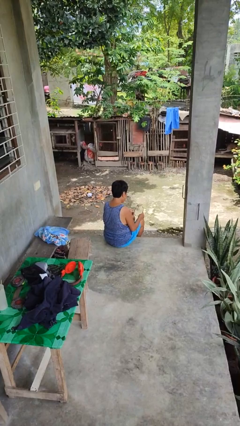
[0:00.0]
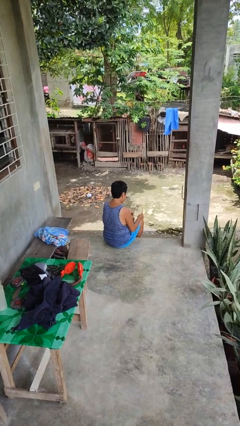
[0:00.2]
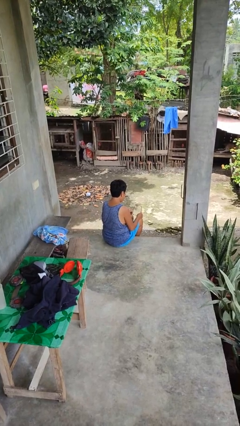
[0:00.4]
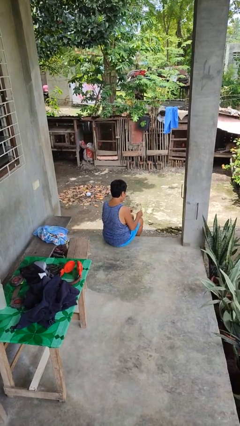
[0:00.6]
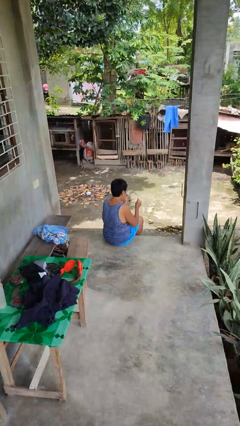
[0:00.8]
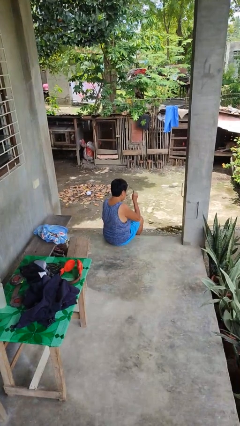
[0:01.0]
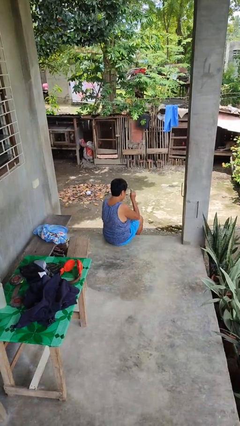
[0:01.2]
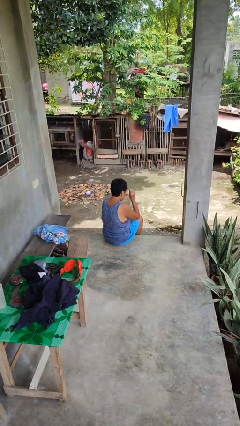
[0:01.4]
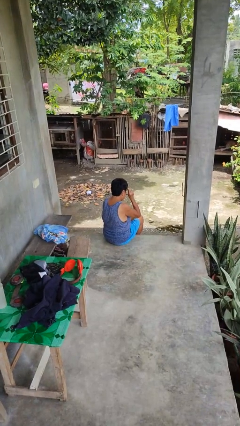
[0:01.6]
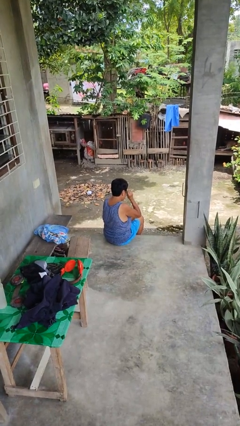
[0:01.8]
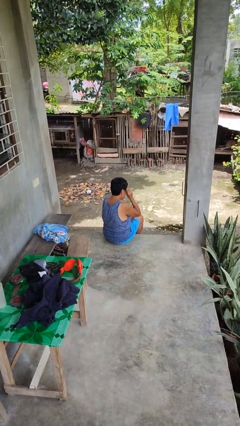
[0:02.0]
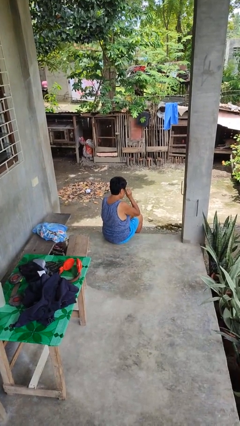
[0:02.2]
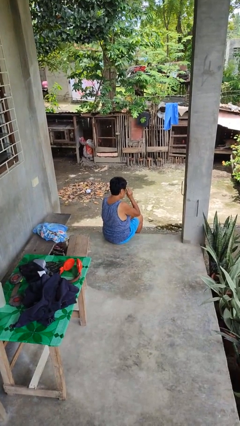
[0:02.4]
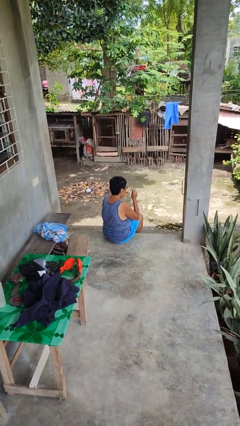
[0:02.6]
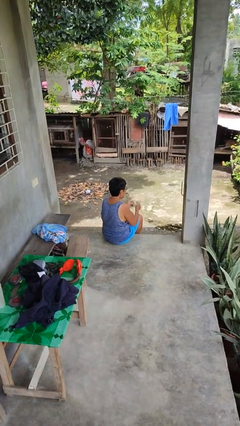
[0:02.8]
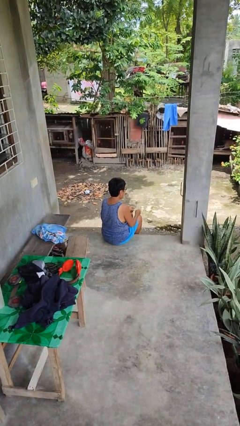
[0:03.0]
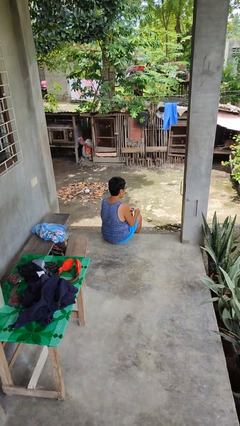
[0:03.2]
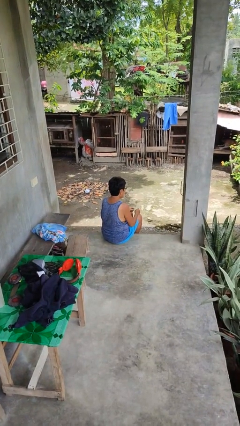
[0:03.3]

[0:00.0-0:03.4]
person puts on glasses

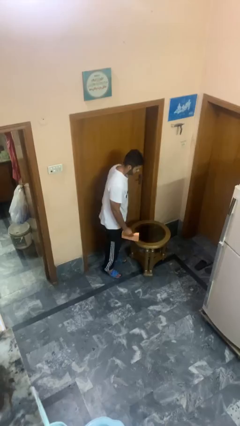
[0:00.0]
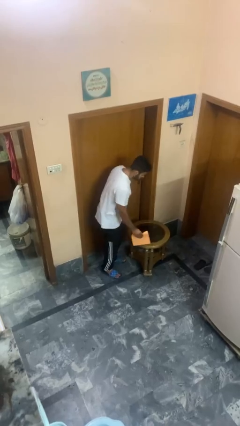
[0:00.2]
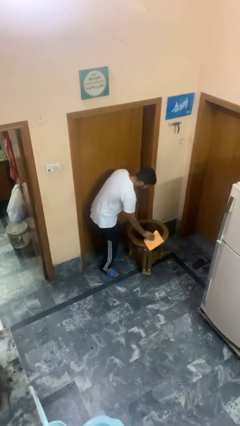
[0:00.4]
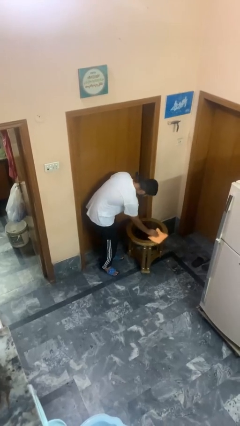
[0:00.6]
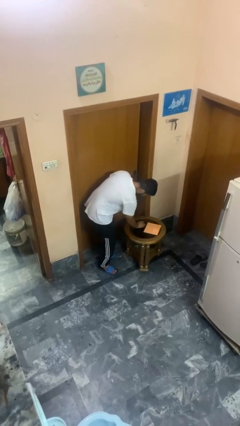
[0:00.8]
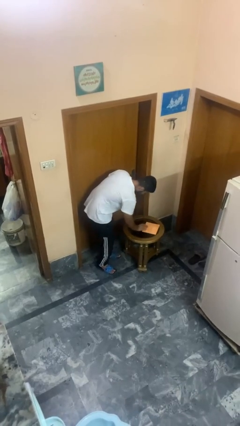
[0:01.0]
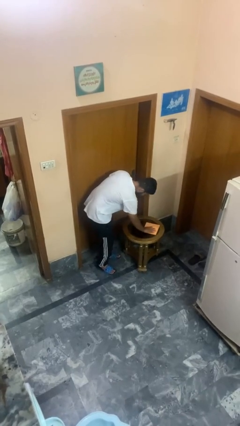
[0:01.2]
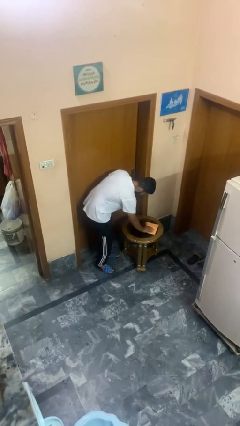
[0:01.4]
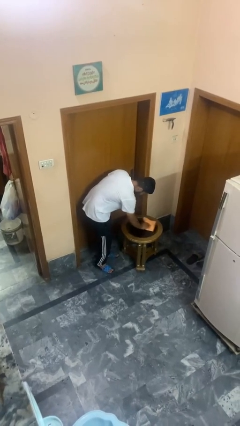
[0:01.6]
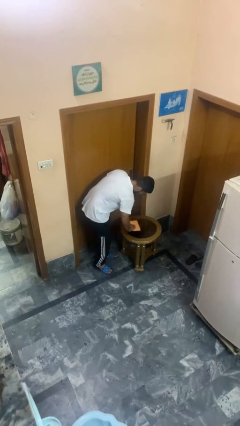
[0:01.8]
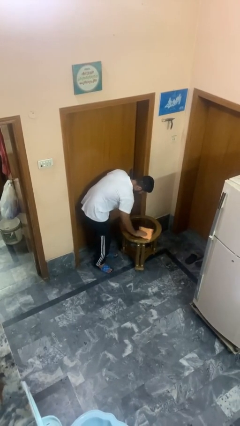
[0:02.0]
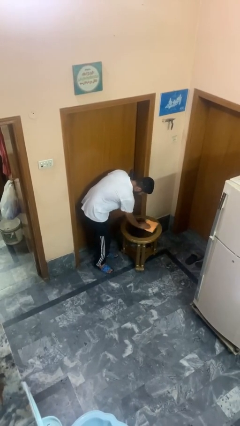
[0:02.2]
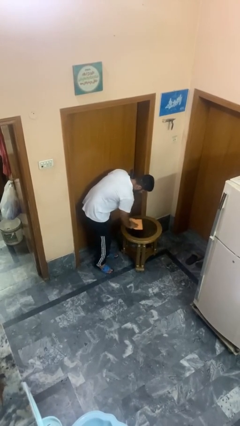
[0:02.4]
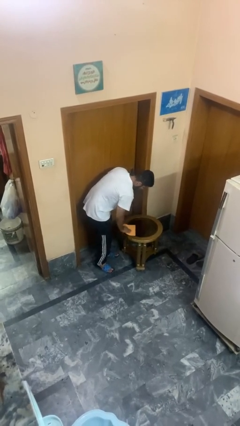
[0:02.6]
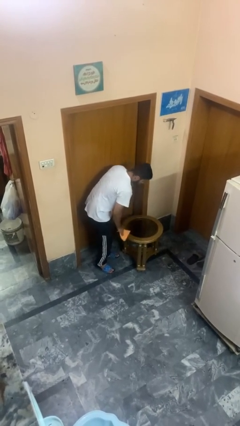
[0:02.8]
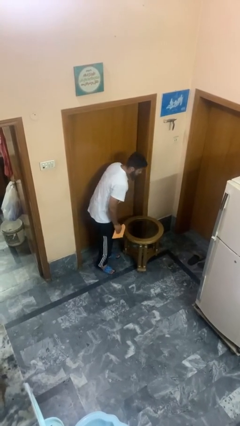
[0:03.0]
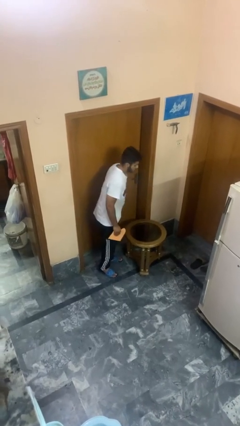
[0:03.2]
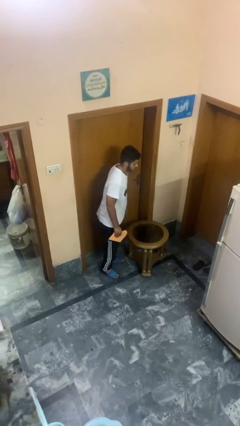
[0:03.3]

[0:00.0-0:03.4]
person cleans table with rag

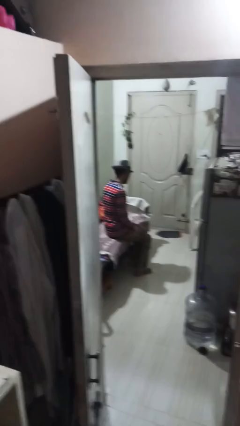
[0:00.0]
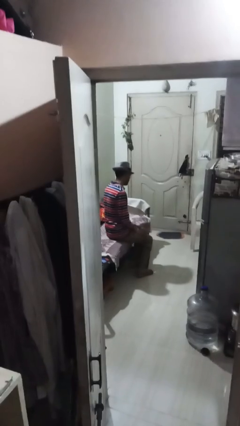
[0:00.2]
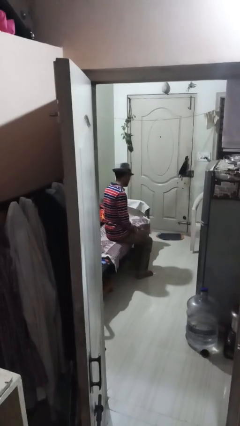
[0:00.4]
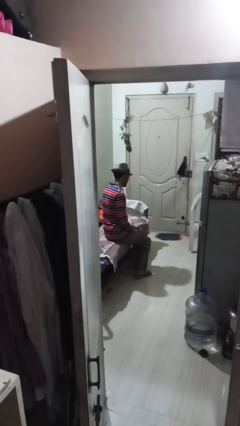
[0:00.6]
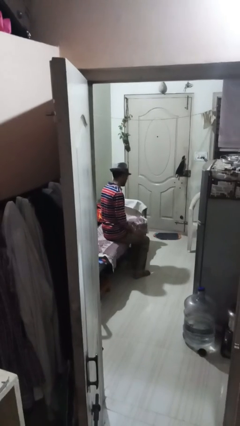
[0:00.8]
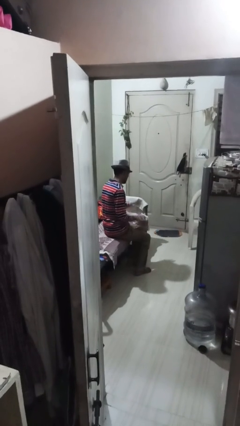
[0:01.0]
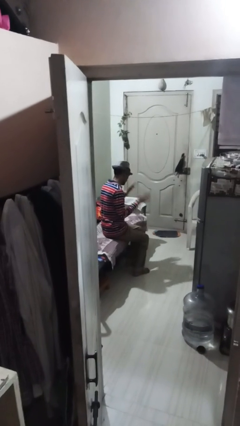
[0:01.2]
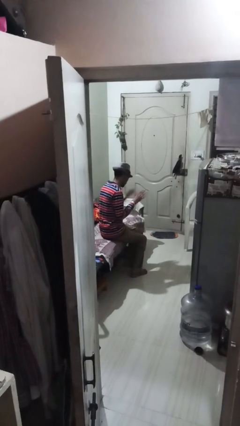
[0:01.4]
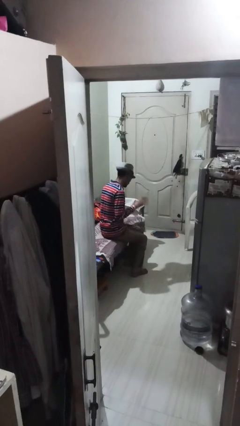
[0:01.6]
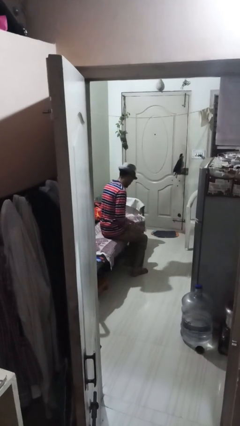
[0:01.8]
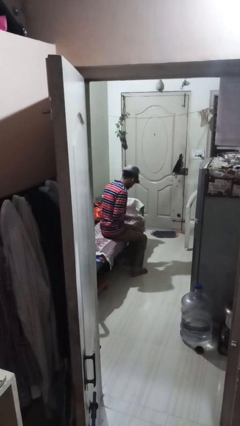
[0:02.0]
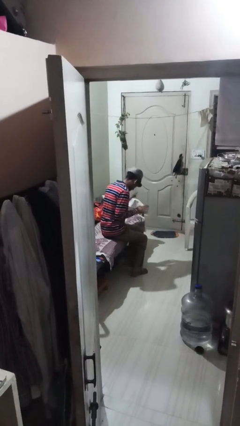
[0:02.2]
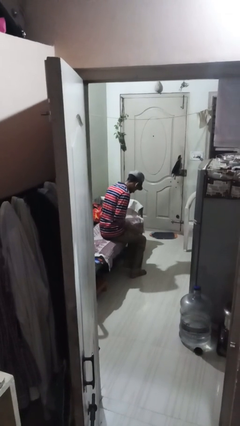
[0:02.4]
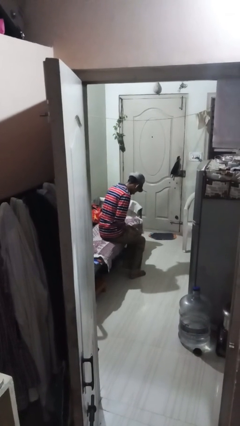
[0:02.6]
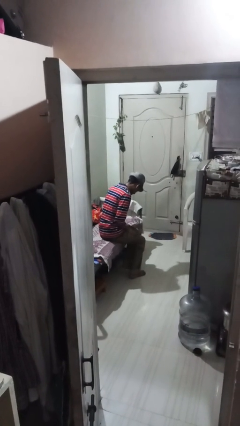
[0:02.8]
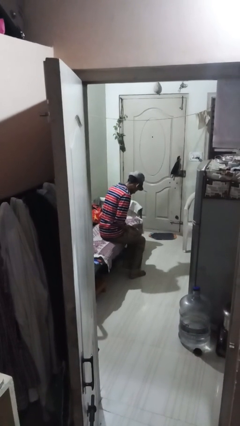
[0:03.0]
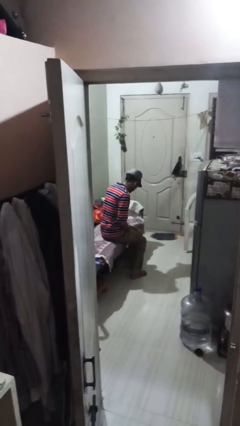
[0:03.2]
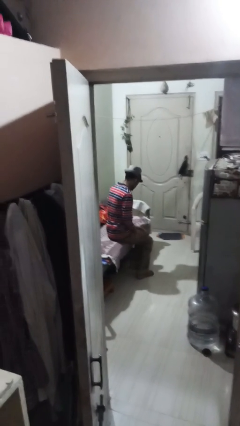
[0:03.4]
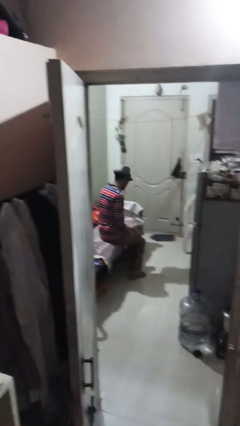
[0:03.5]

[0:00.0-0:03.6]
person slaps hands on thighs

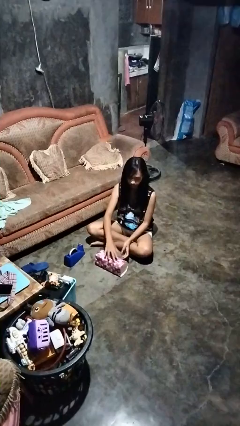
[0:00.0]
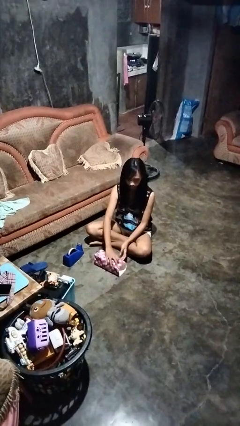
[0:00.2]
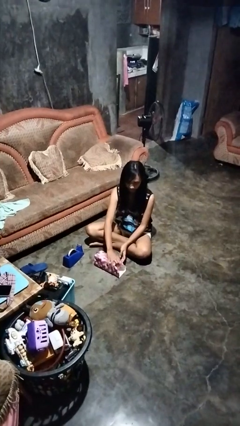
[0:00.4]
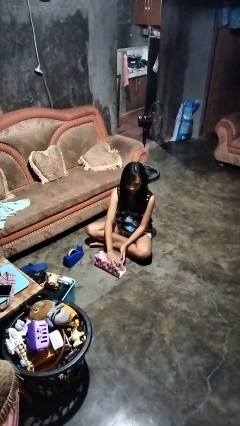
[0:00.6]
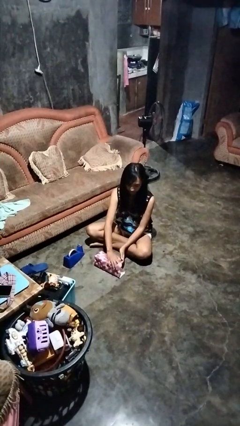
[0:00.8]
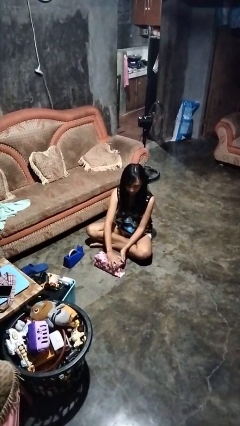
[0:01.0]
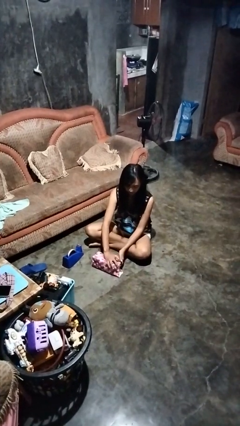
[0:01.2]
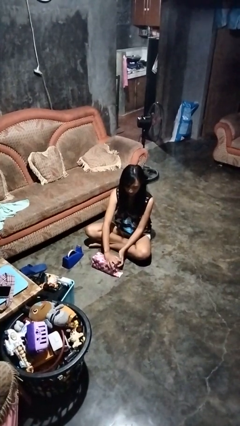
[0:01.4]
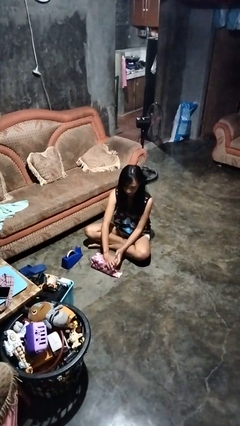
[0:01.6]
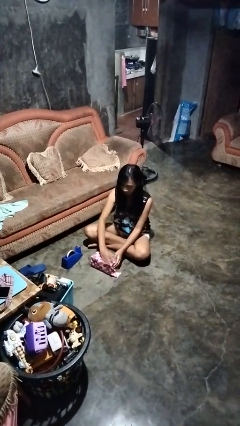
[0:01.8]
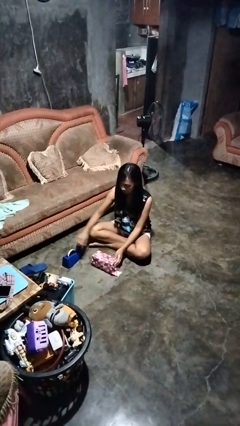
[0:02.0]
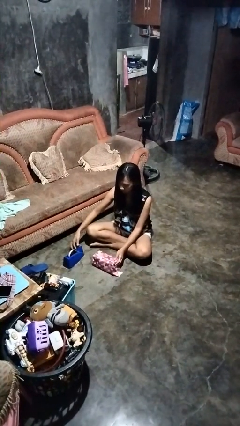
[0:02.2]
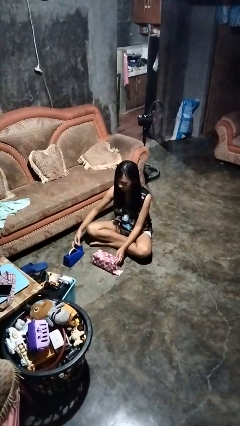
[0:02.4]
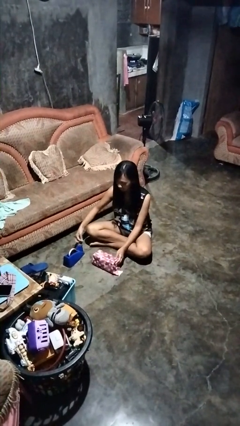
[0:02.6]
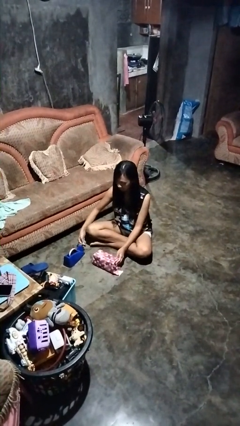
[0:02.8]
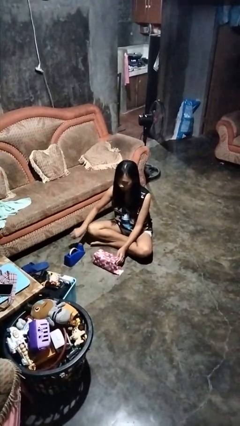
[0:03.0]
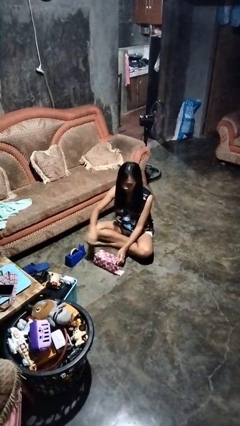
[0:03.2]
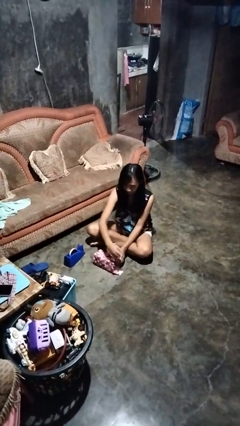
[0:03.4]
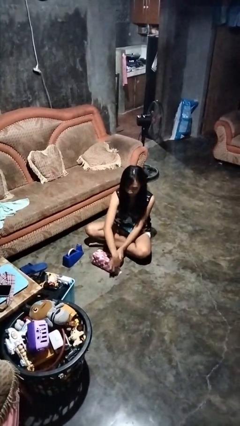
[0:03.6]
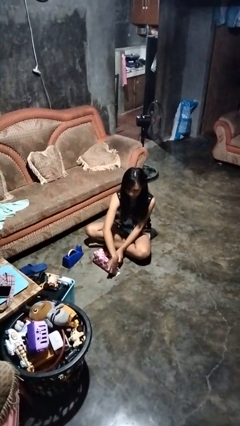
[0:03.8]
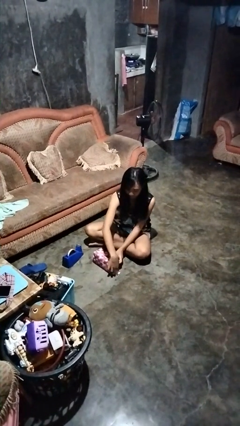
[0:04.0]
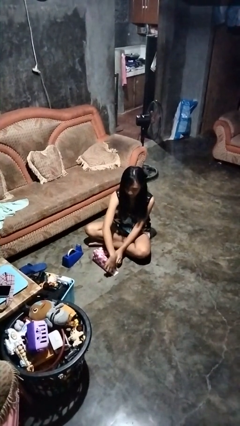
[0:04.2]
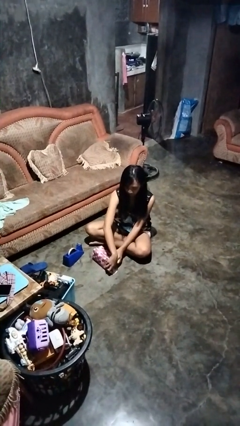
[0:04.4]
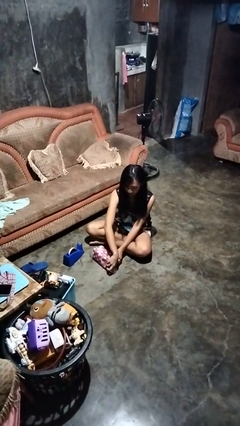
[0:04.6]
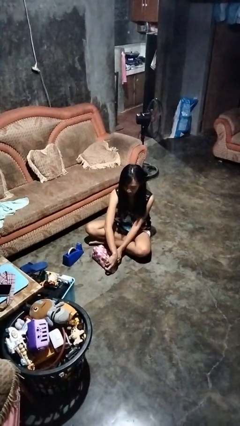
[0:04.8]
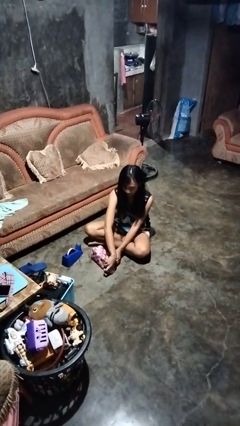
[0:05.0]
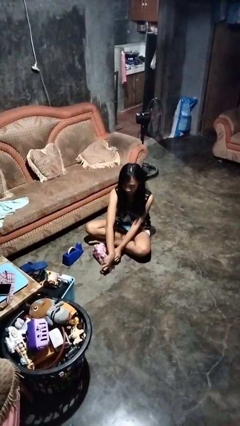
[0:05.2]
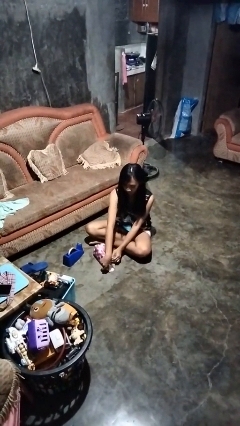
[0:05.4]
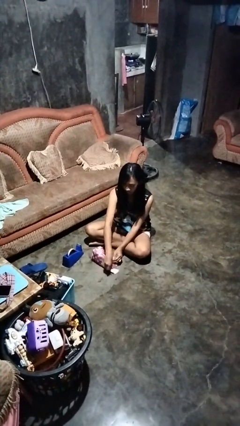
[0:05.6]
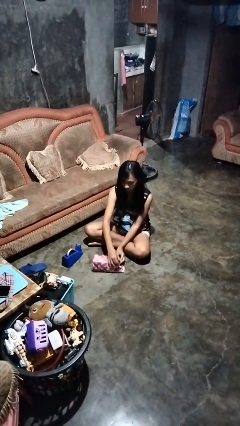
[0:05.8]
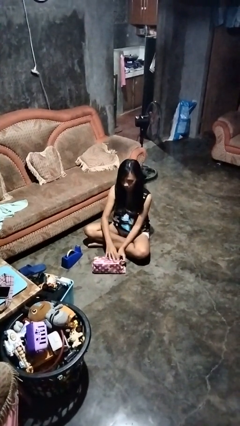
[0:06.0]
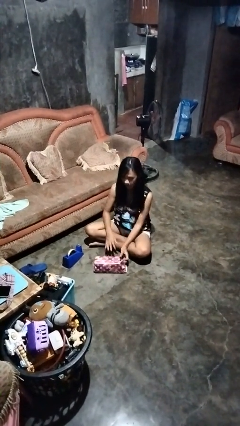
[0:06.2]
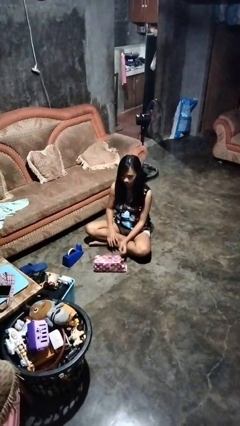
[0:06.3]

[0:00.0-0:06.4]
person wraps box

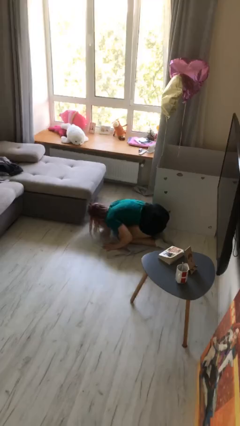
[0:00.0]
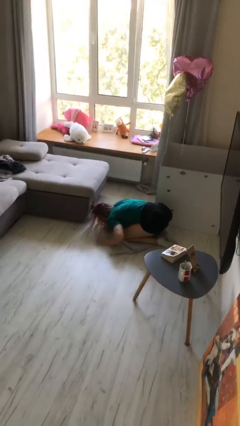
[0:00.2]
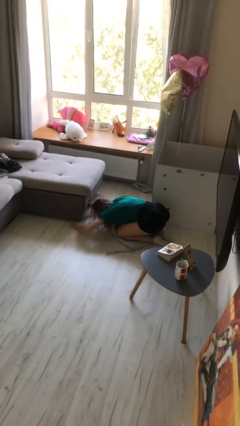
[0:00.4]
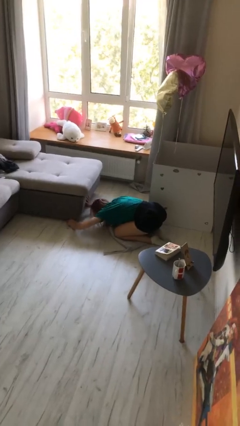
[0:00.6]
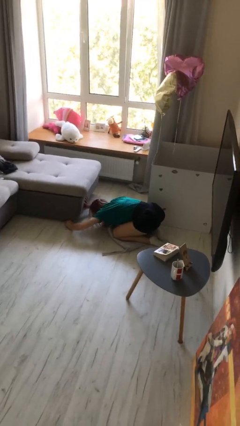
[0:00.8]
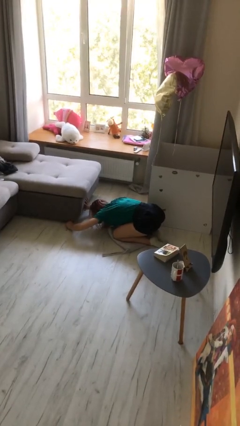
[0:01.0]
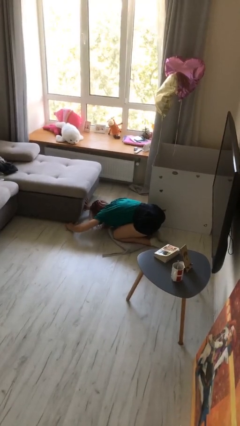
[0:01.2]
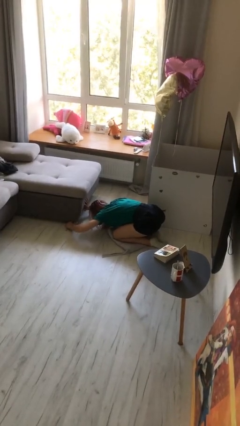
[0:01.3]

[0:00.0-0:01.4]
person searches under bed
